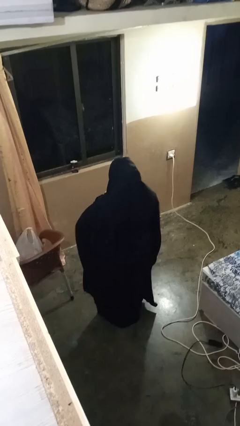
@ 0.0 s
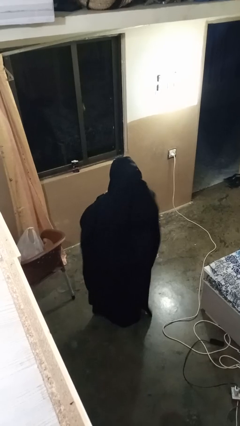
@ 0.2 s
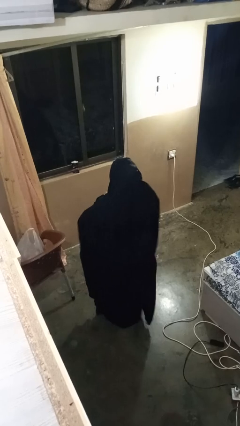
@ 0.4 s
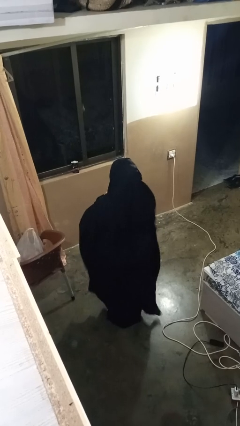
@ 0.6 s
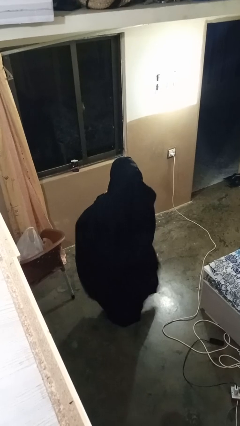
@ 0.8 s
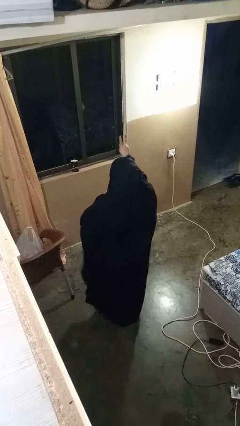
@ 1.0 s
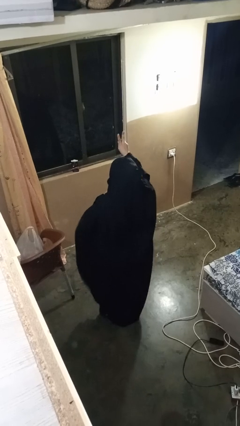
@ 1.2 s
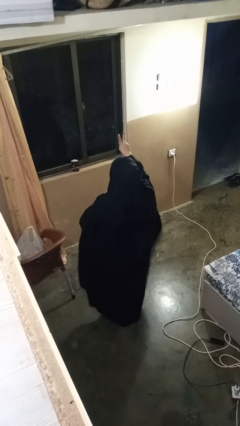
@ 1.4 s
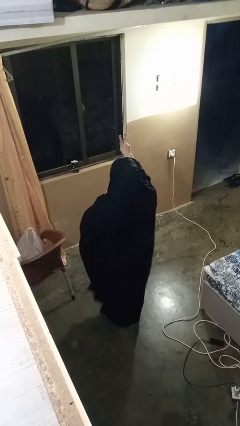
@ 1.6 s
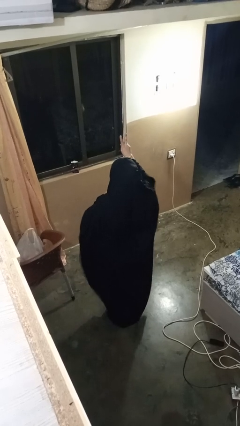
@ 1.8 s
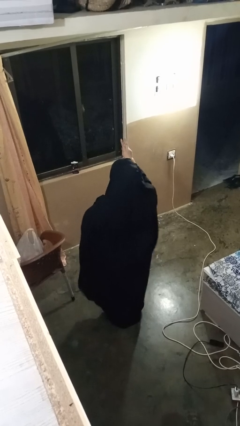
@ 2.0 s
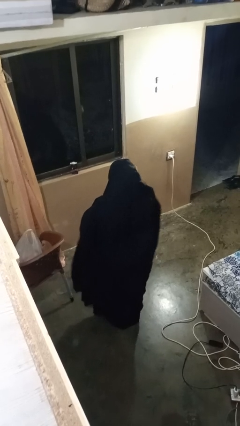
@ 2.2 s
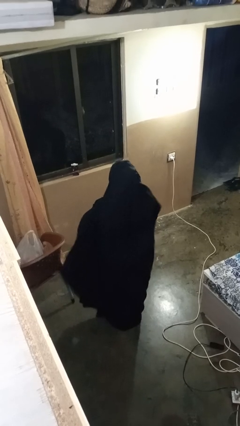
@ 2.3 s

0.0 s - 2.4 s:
person gestures peace

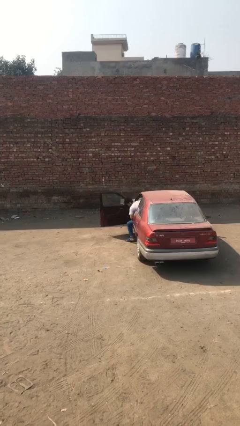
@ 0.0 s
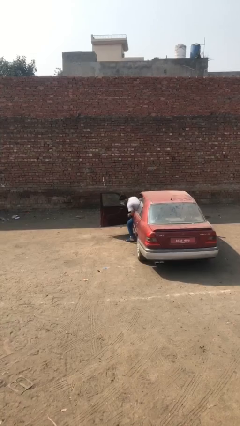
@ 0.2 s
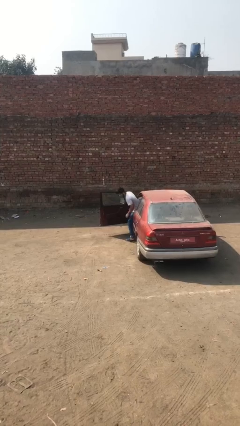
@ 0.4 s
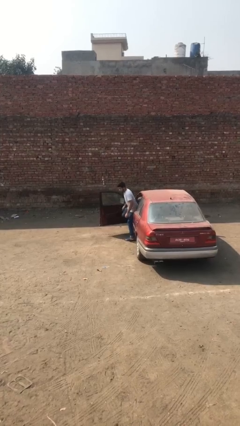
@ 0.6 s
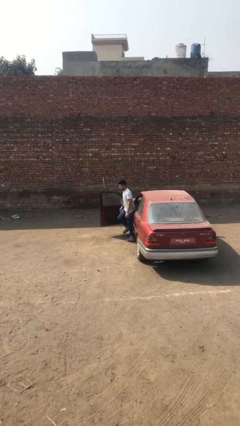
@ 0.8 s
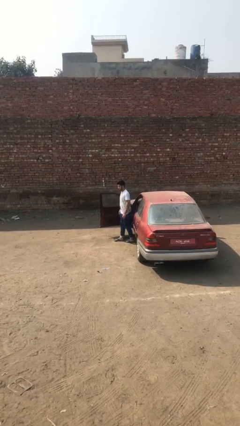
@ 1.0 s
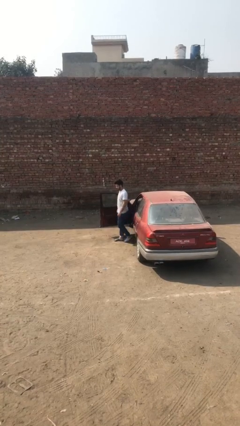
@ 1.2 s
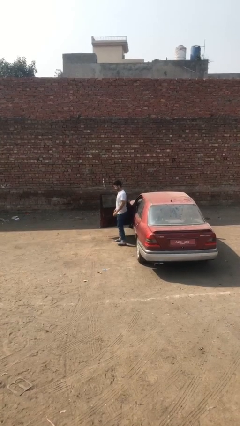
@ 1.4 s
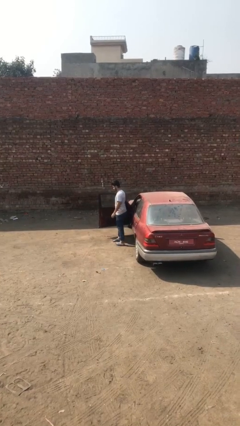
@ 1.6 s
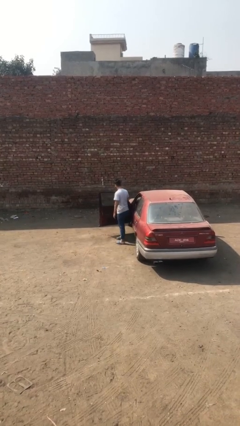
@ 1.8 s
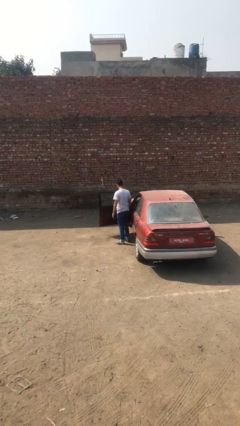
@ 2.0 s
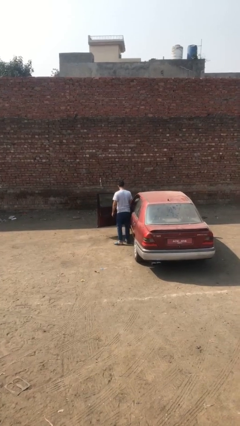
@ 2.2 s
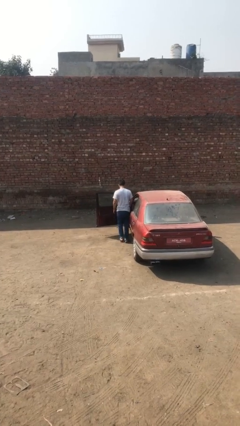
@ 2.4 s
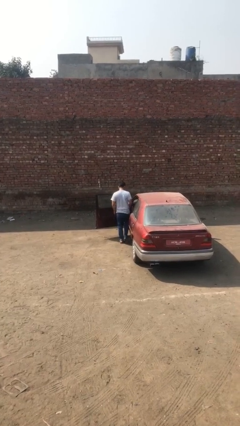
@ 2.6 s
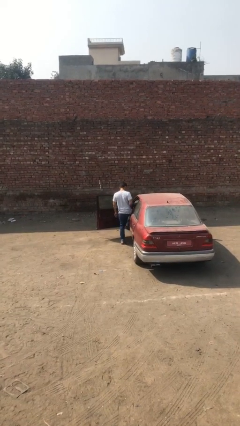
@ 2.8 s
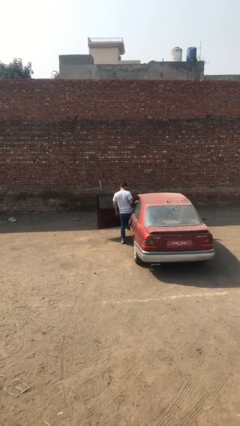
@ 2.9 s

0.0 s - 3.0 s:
person exits car

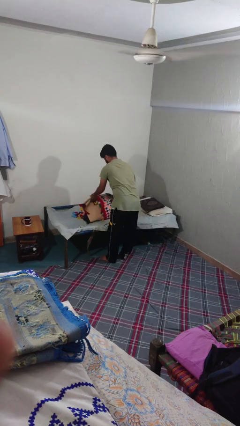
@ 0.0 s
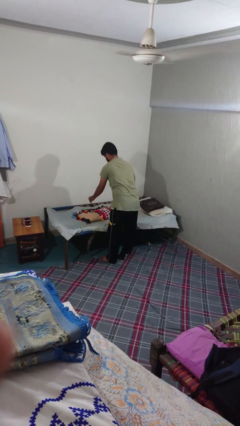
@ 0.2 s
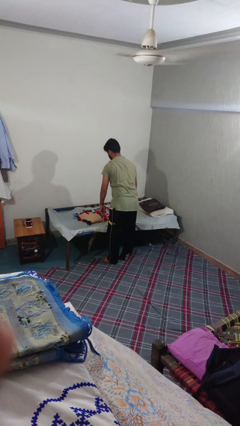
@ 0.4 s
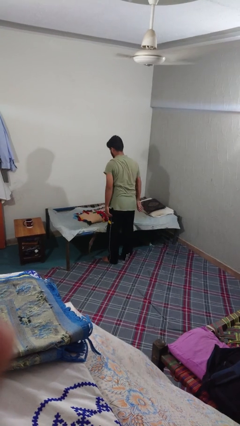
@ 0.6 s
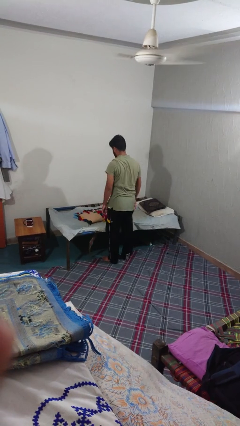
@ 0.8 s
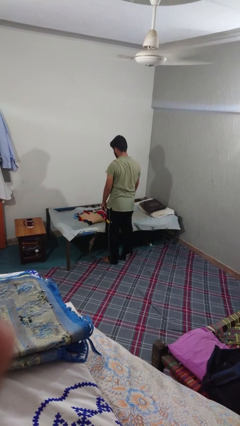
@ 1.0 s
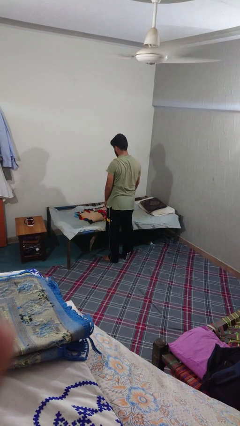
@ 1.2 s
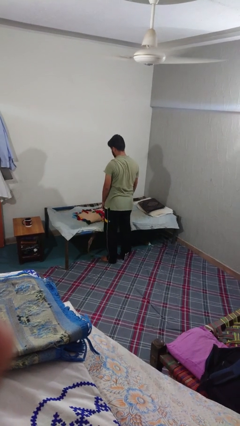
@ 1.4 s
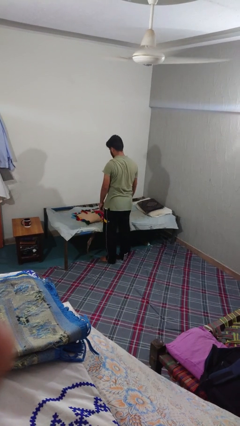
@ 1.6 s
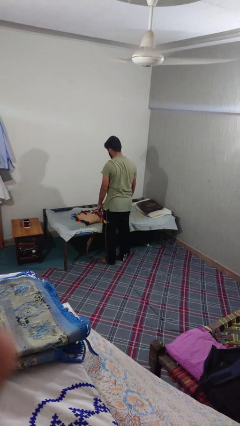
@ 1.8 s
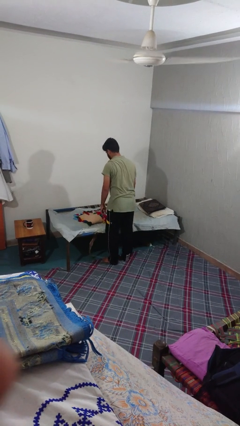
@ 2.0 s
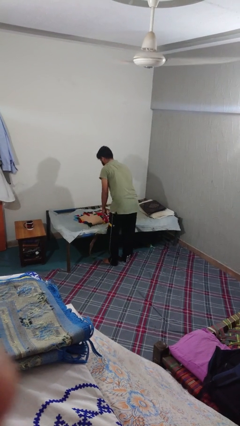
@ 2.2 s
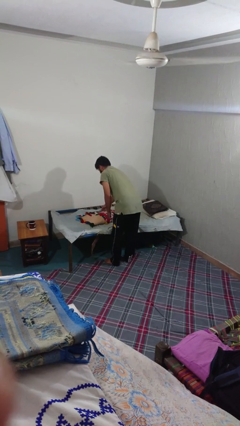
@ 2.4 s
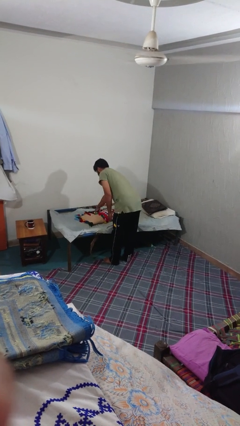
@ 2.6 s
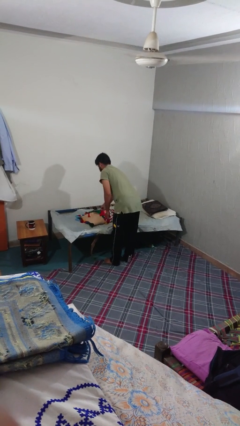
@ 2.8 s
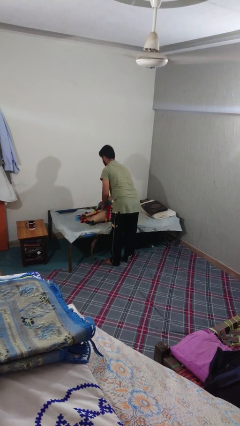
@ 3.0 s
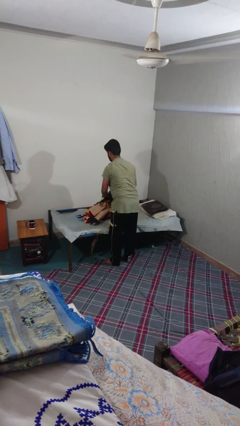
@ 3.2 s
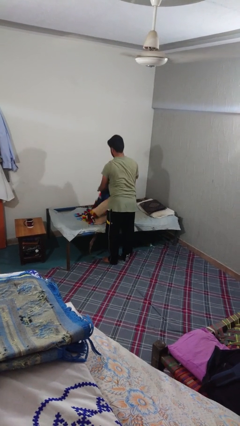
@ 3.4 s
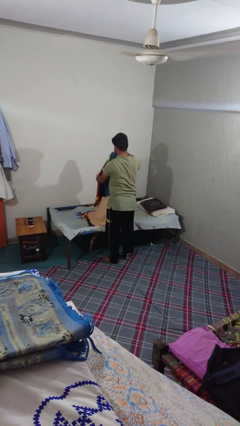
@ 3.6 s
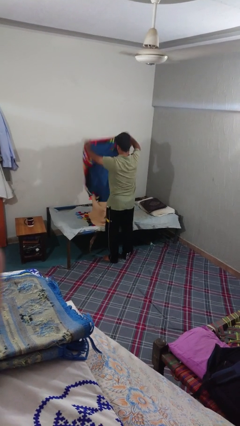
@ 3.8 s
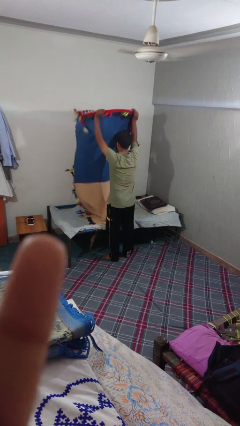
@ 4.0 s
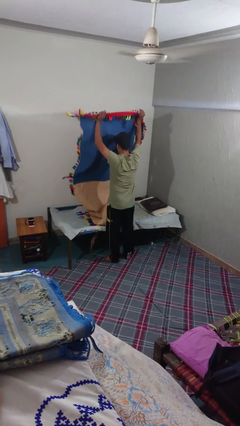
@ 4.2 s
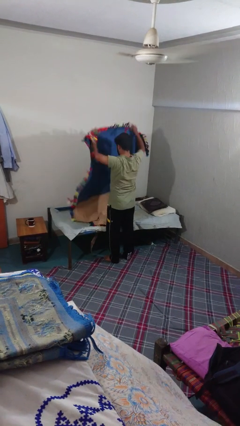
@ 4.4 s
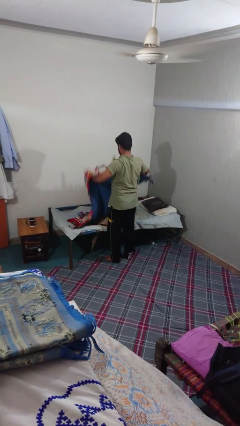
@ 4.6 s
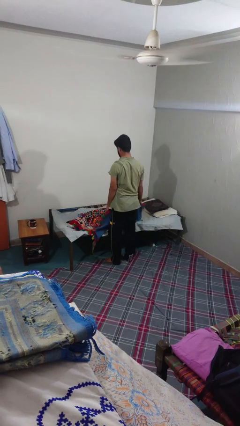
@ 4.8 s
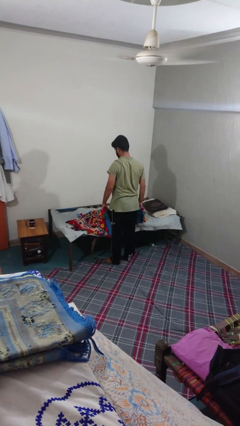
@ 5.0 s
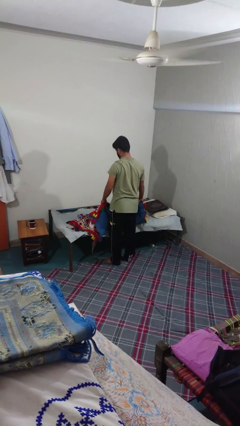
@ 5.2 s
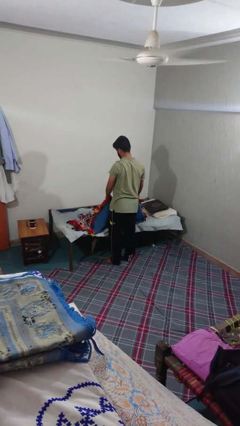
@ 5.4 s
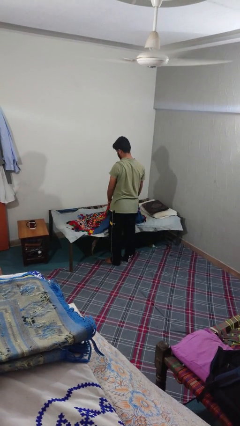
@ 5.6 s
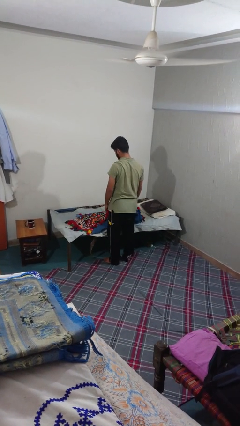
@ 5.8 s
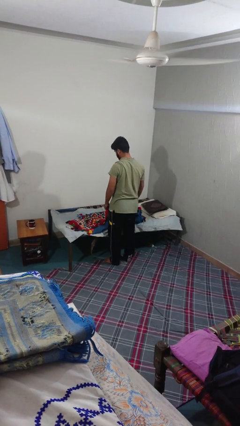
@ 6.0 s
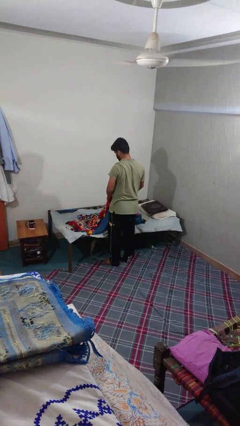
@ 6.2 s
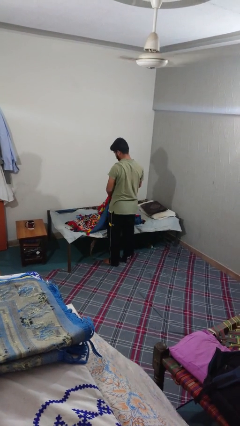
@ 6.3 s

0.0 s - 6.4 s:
person unfolds blanket

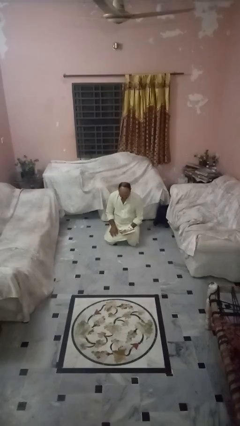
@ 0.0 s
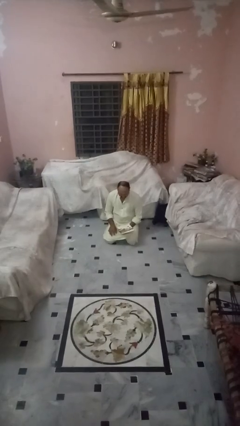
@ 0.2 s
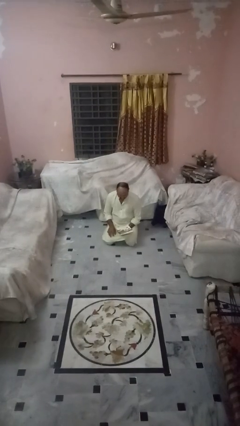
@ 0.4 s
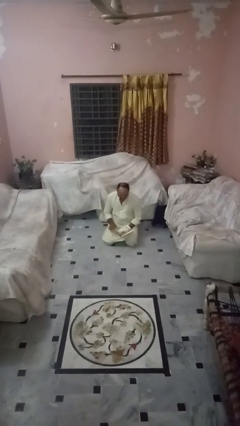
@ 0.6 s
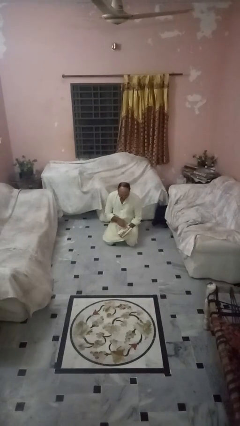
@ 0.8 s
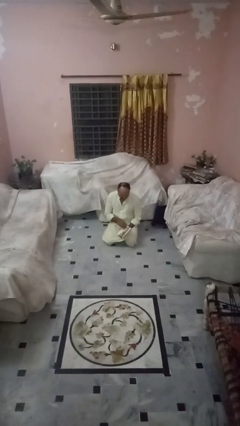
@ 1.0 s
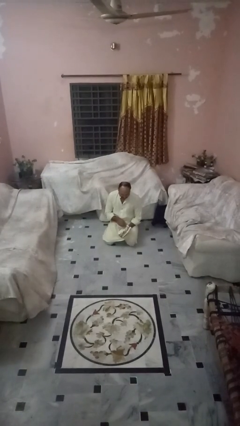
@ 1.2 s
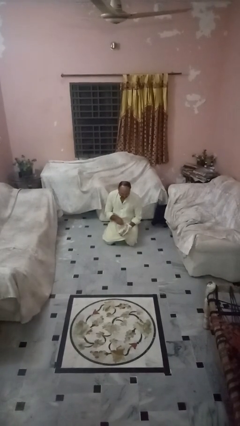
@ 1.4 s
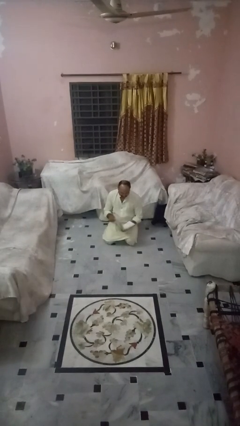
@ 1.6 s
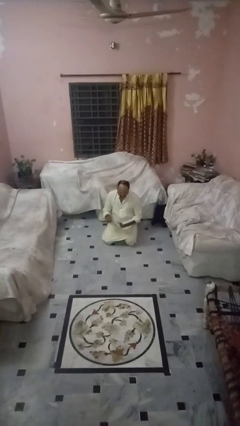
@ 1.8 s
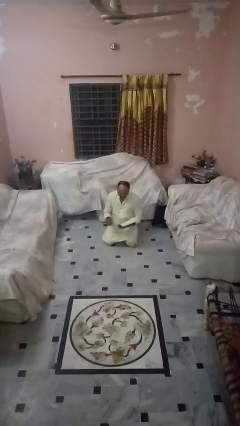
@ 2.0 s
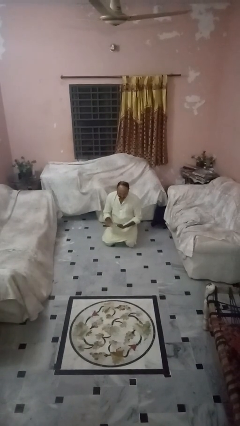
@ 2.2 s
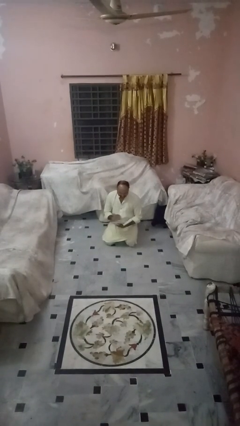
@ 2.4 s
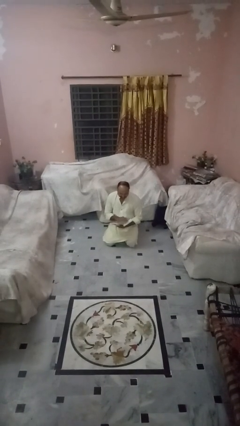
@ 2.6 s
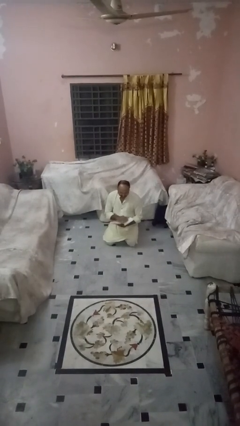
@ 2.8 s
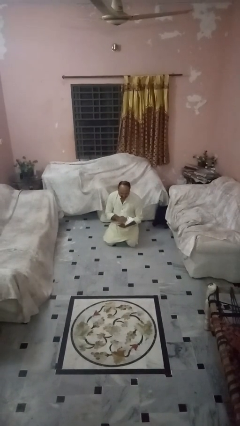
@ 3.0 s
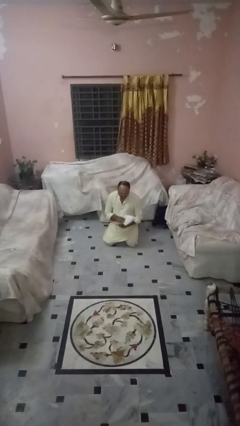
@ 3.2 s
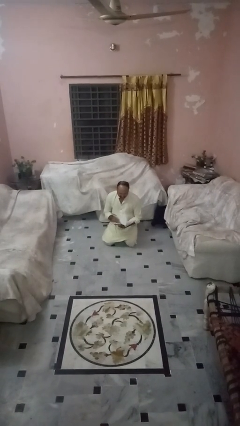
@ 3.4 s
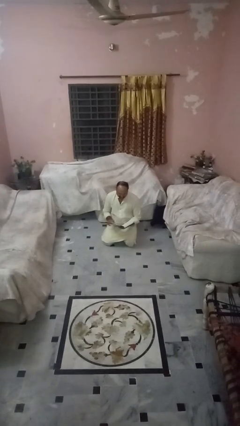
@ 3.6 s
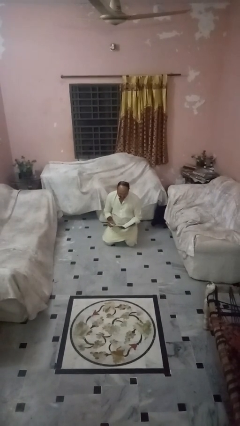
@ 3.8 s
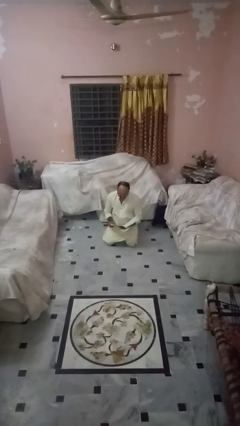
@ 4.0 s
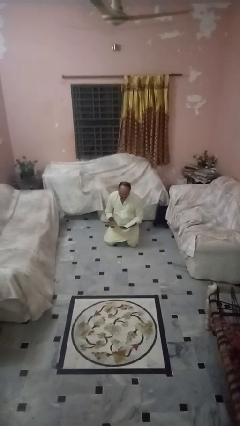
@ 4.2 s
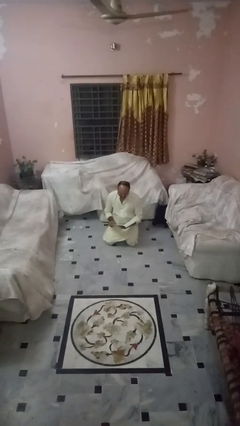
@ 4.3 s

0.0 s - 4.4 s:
person reads magazine

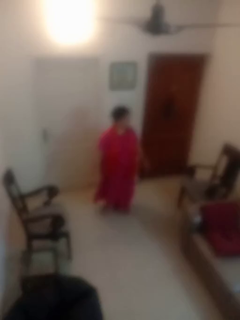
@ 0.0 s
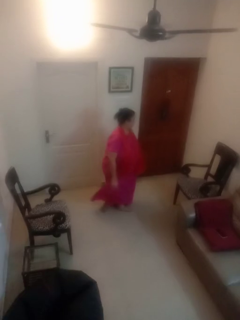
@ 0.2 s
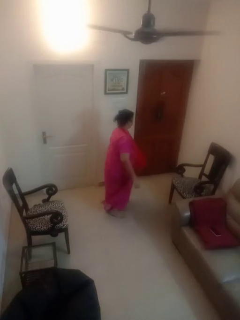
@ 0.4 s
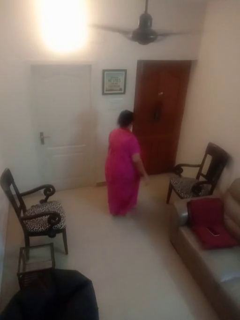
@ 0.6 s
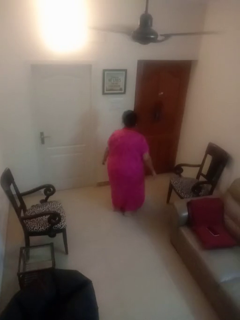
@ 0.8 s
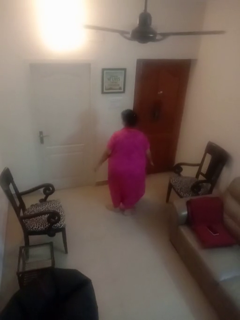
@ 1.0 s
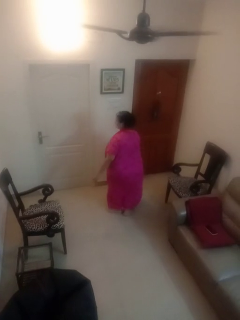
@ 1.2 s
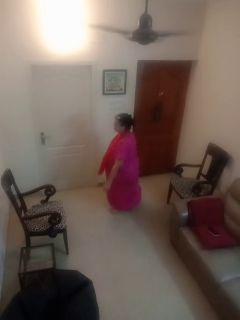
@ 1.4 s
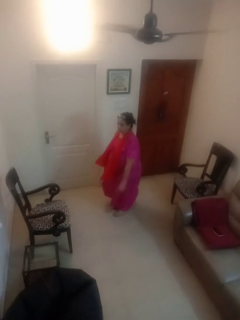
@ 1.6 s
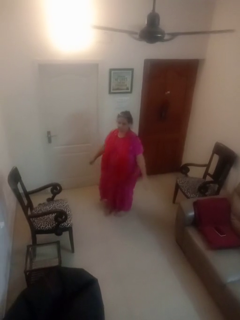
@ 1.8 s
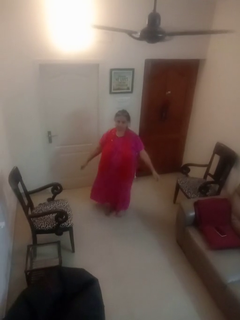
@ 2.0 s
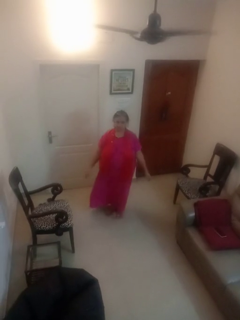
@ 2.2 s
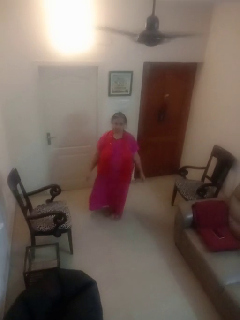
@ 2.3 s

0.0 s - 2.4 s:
person twirls
